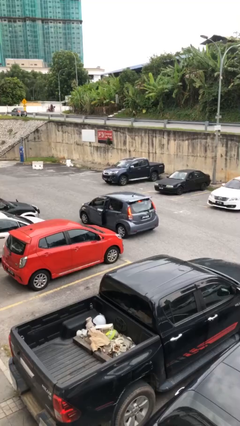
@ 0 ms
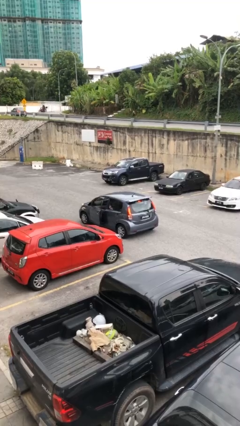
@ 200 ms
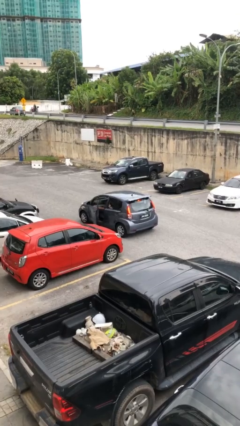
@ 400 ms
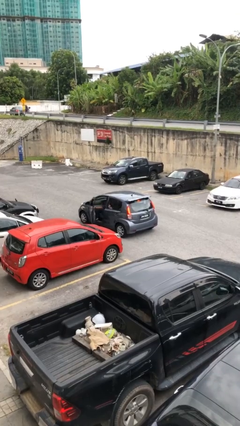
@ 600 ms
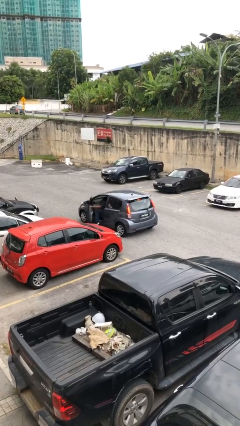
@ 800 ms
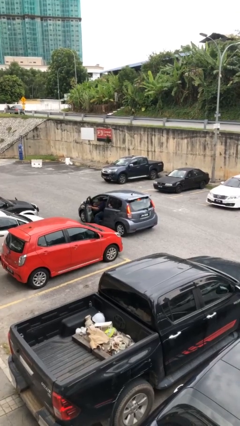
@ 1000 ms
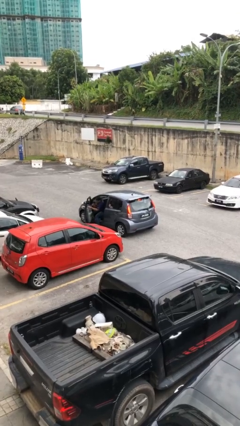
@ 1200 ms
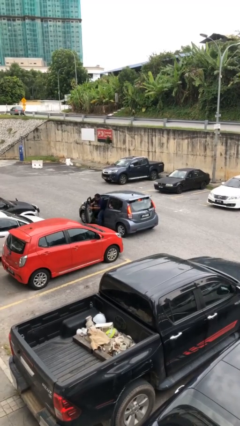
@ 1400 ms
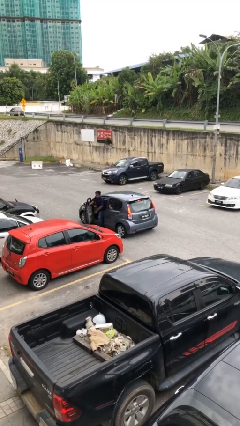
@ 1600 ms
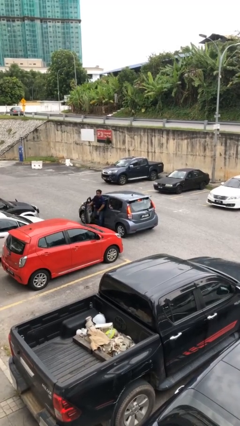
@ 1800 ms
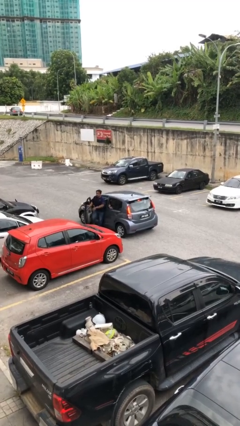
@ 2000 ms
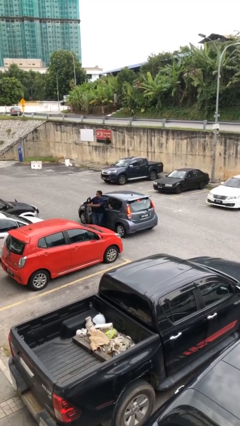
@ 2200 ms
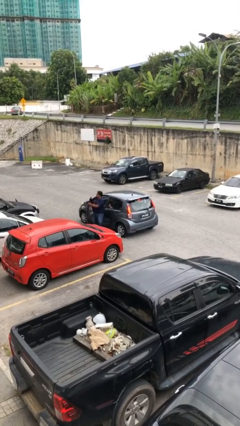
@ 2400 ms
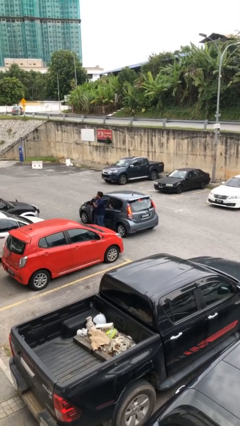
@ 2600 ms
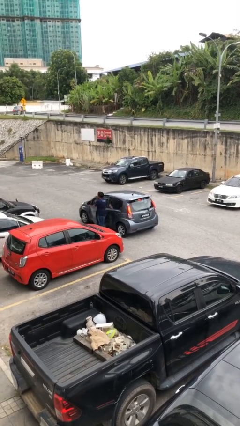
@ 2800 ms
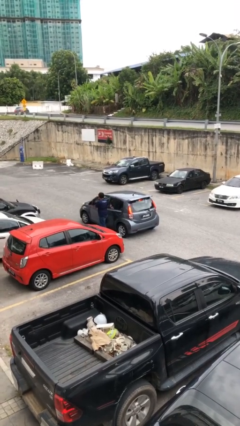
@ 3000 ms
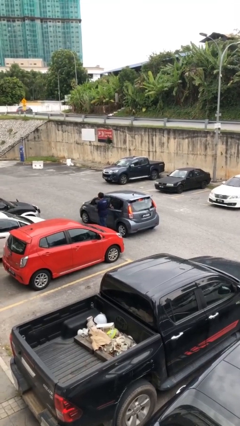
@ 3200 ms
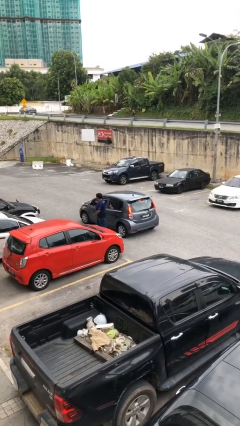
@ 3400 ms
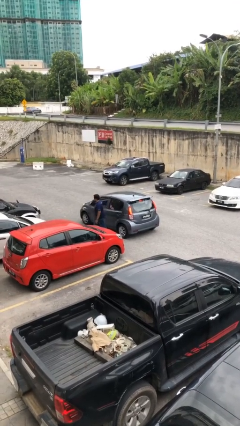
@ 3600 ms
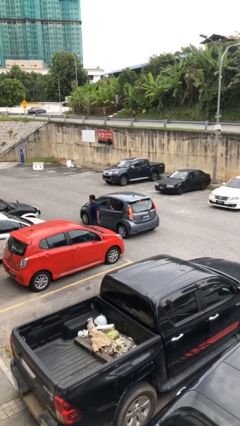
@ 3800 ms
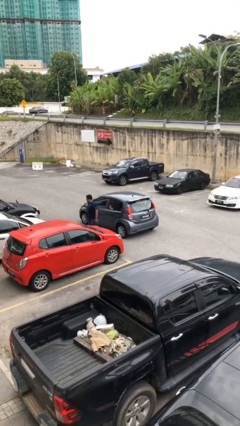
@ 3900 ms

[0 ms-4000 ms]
car drops off person

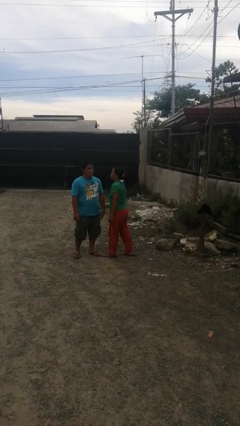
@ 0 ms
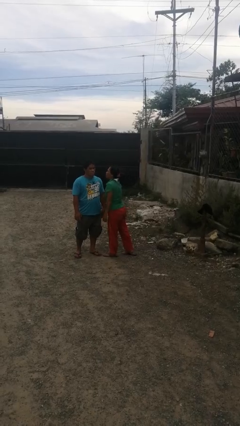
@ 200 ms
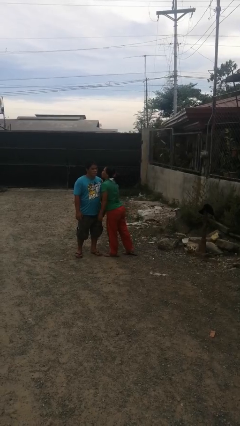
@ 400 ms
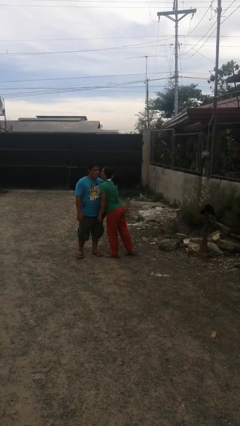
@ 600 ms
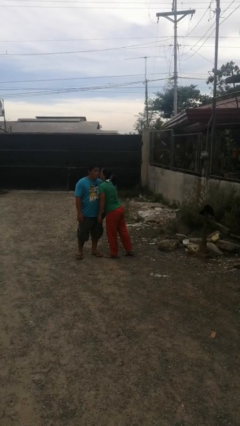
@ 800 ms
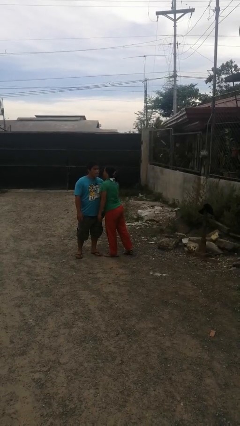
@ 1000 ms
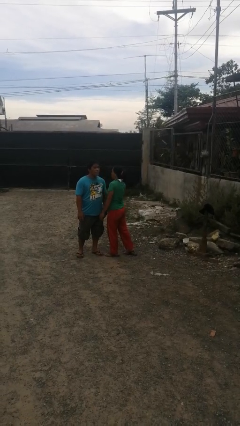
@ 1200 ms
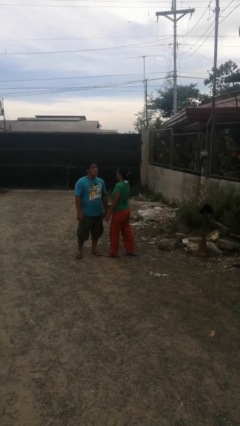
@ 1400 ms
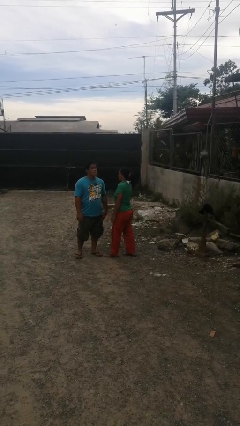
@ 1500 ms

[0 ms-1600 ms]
person kisses cheek of person

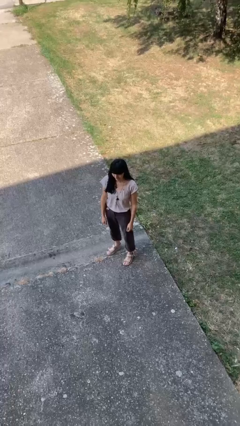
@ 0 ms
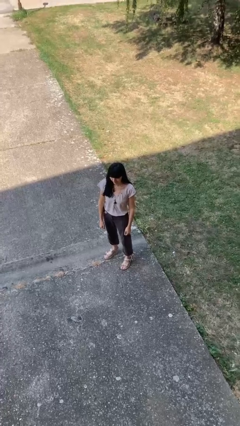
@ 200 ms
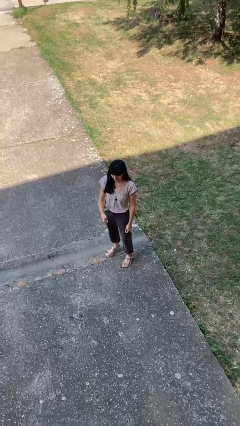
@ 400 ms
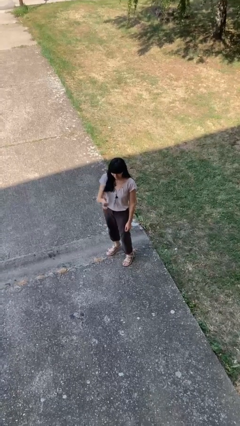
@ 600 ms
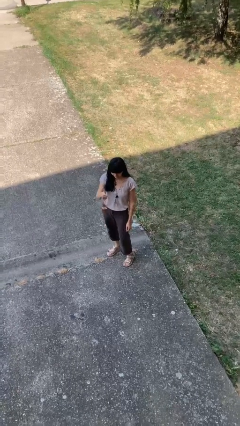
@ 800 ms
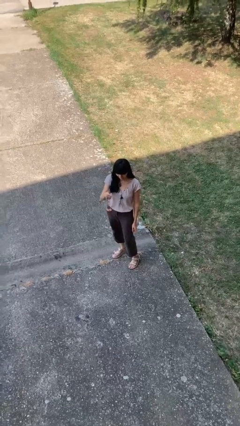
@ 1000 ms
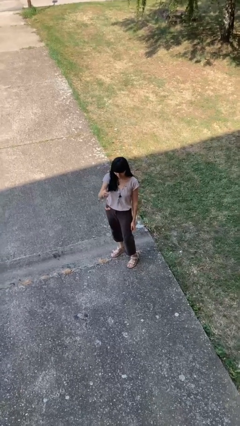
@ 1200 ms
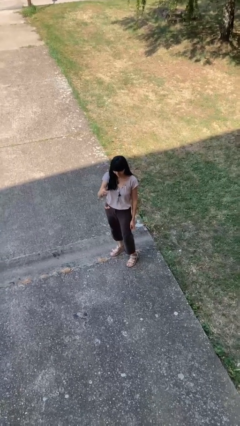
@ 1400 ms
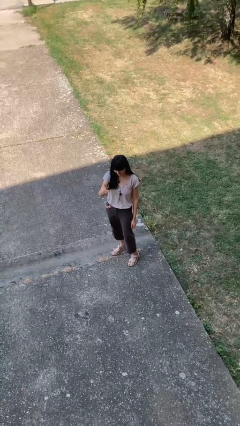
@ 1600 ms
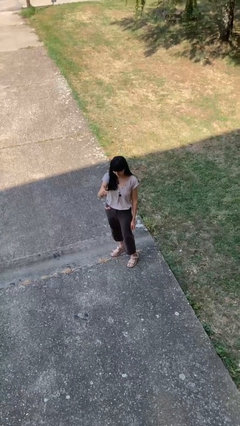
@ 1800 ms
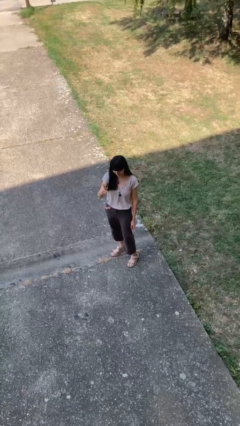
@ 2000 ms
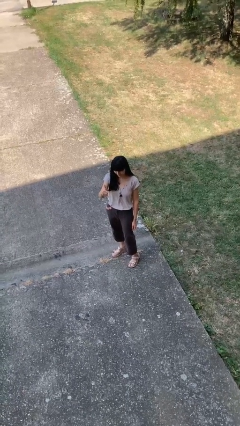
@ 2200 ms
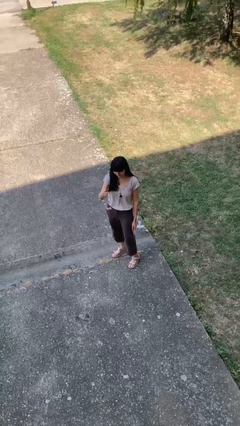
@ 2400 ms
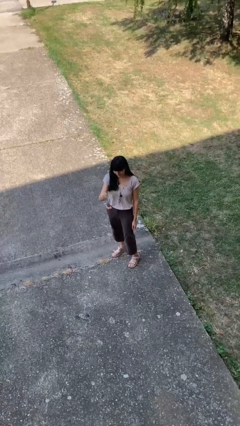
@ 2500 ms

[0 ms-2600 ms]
person gestures thumbs up

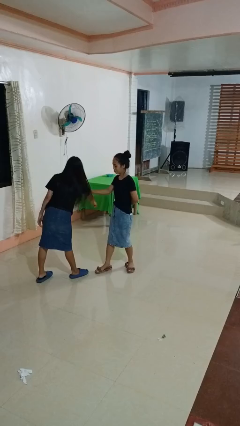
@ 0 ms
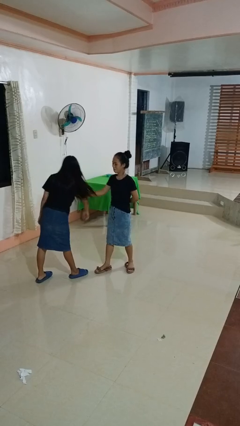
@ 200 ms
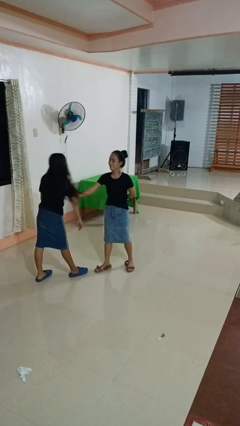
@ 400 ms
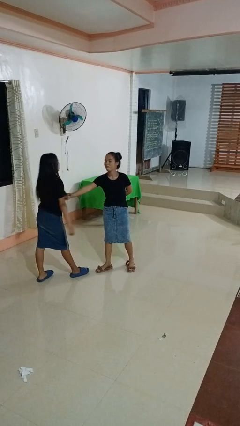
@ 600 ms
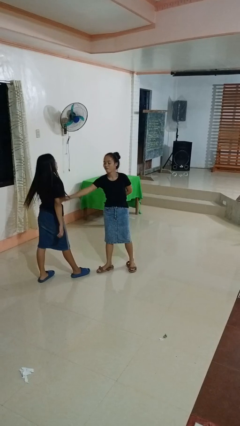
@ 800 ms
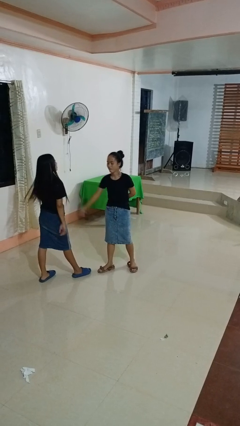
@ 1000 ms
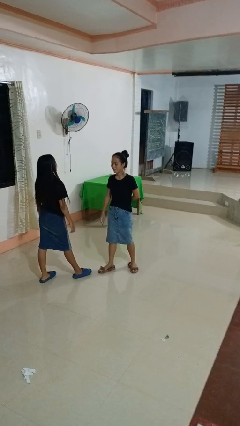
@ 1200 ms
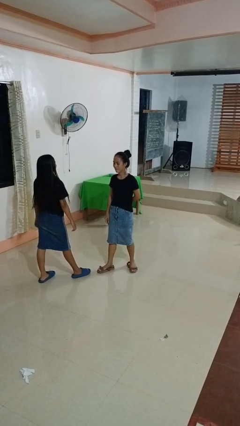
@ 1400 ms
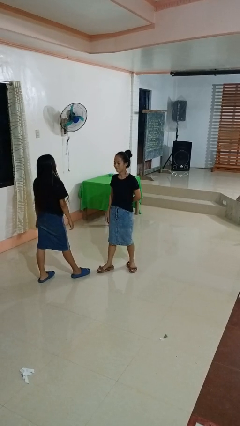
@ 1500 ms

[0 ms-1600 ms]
person grabs person by bicep

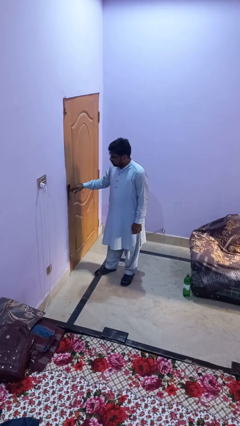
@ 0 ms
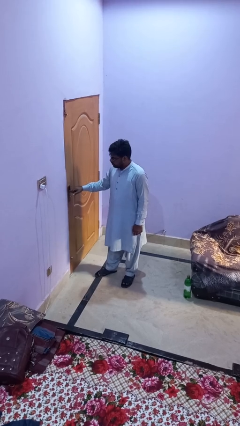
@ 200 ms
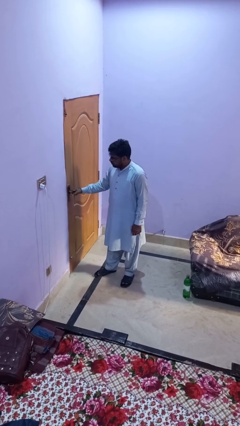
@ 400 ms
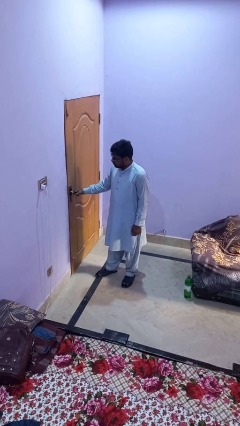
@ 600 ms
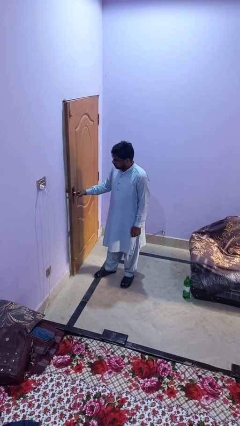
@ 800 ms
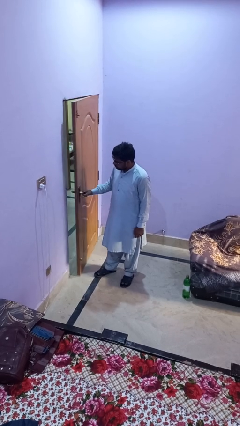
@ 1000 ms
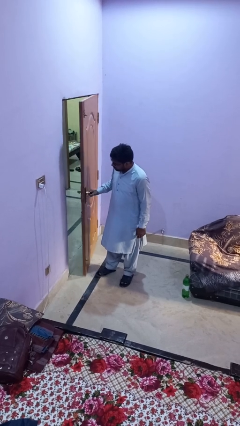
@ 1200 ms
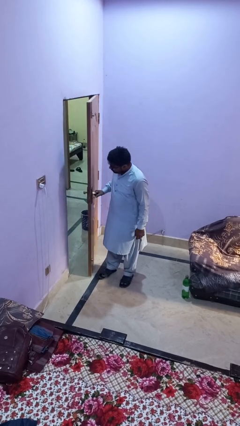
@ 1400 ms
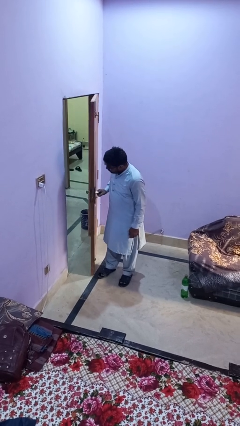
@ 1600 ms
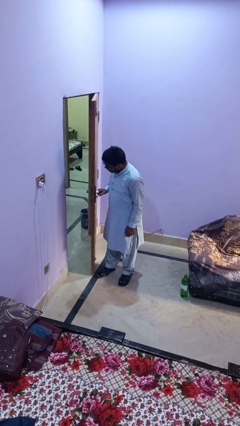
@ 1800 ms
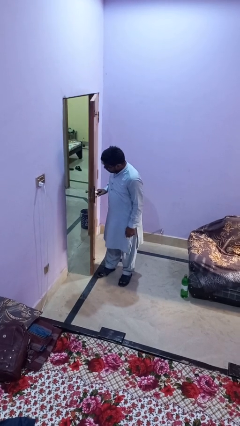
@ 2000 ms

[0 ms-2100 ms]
person opens facility door

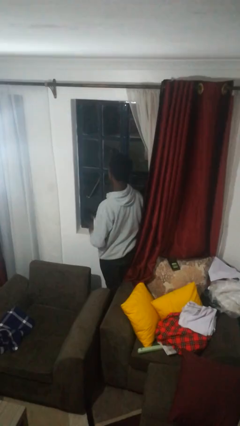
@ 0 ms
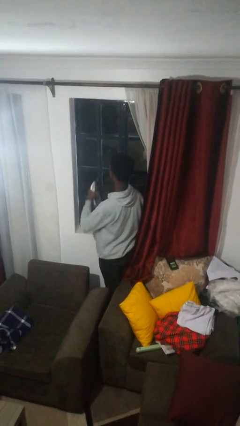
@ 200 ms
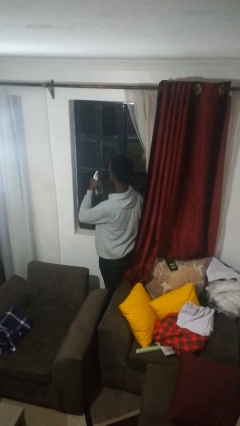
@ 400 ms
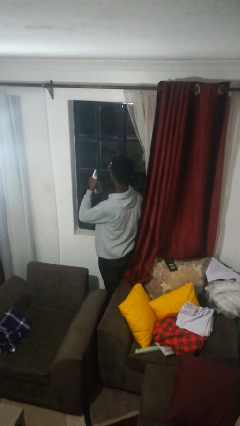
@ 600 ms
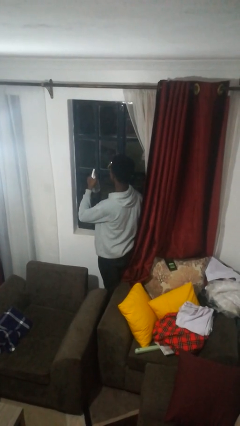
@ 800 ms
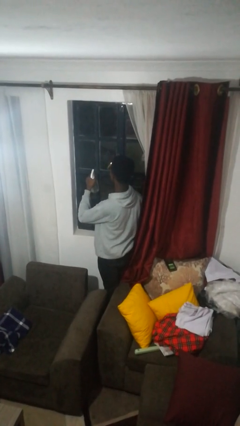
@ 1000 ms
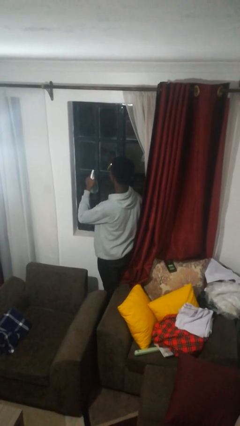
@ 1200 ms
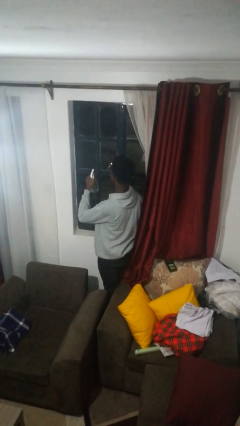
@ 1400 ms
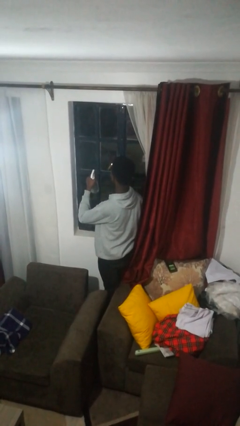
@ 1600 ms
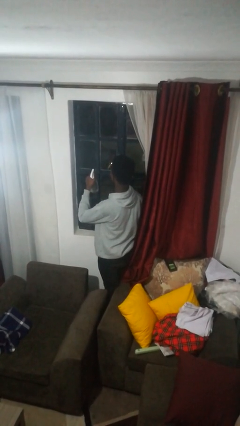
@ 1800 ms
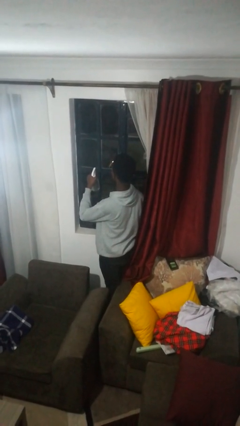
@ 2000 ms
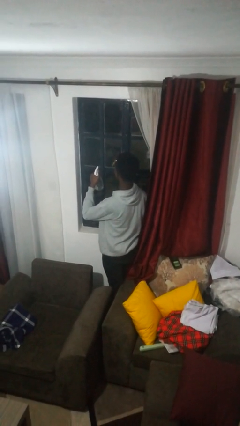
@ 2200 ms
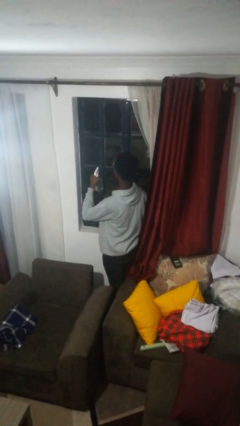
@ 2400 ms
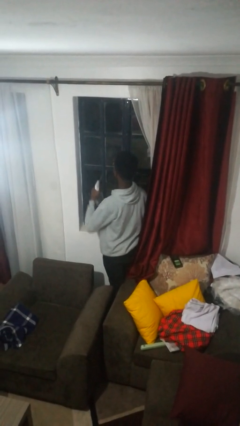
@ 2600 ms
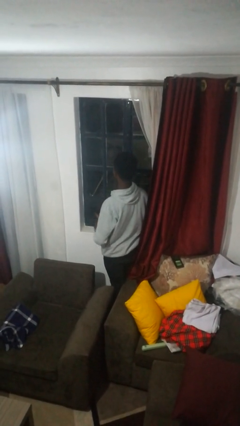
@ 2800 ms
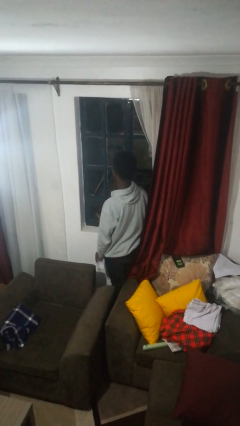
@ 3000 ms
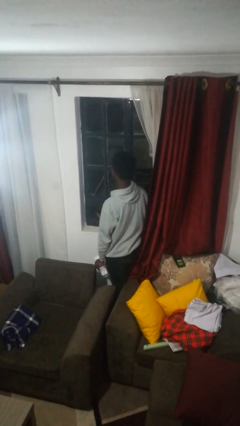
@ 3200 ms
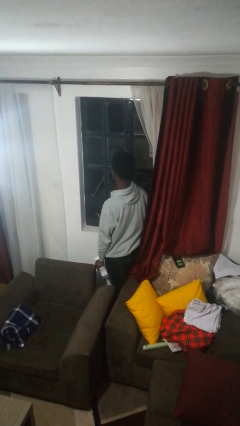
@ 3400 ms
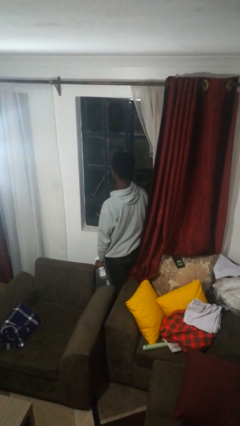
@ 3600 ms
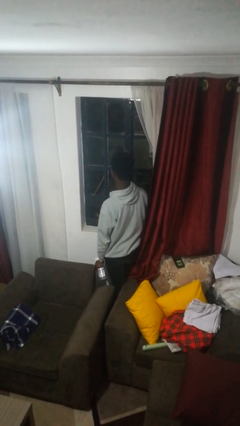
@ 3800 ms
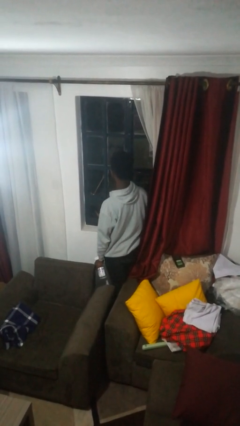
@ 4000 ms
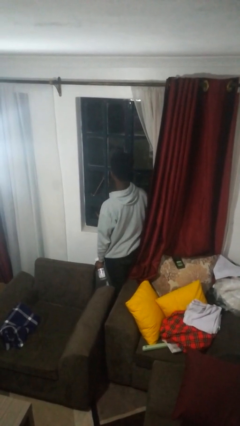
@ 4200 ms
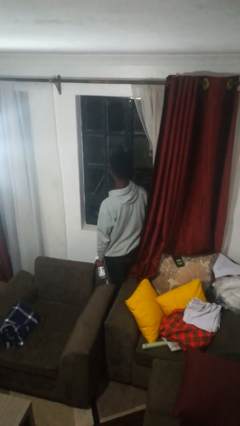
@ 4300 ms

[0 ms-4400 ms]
person sprays from bottle

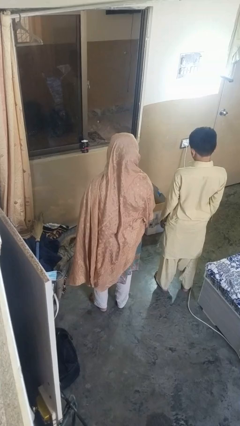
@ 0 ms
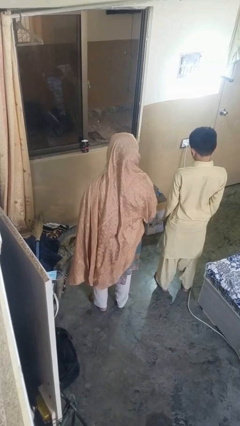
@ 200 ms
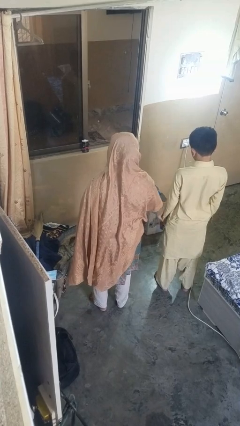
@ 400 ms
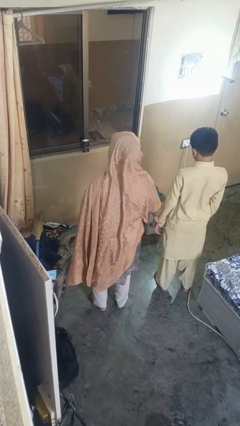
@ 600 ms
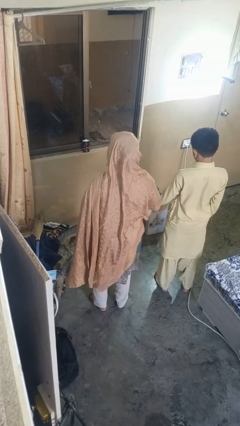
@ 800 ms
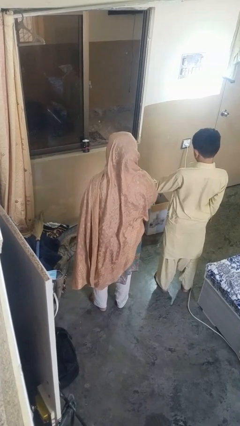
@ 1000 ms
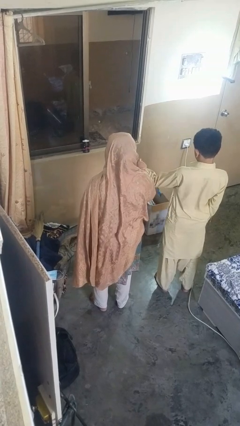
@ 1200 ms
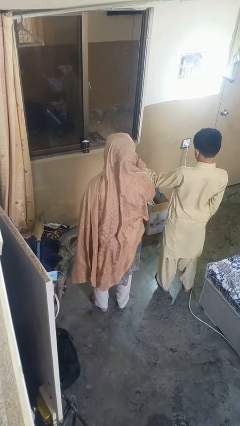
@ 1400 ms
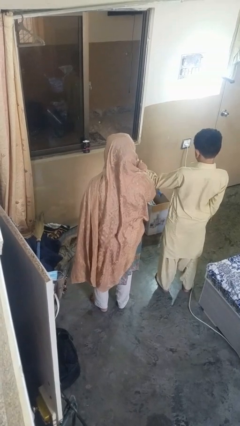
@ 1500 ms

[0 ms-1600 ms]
person grabs person by forearm
